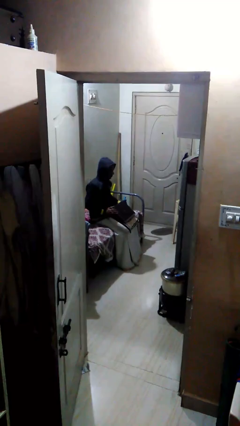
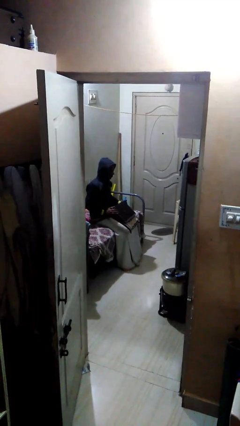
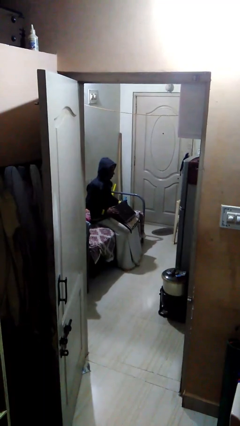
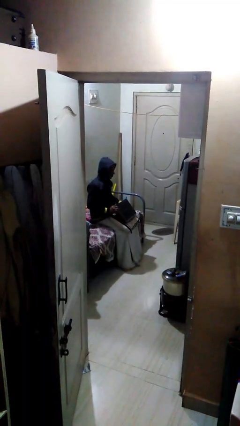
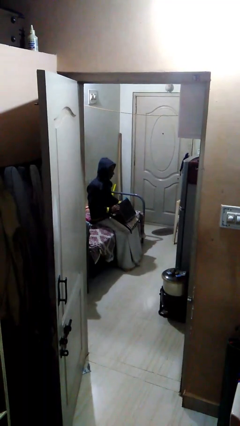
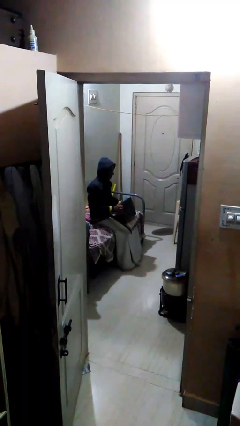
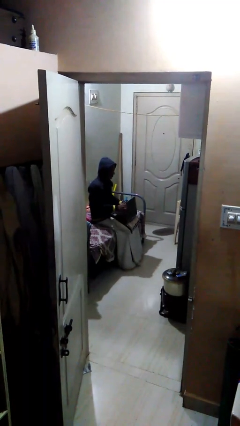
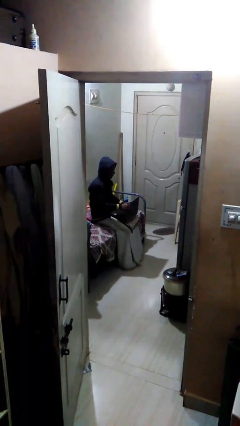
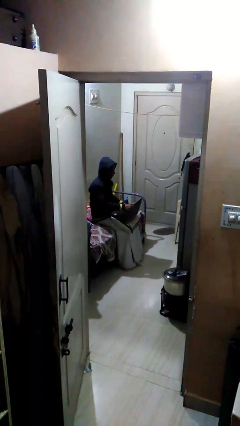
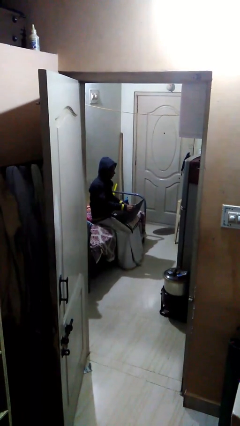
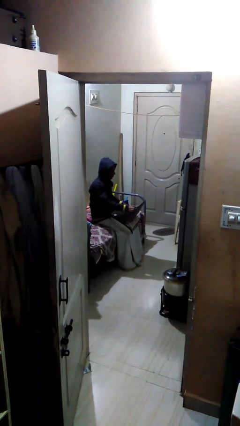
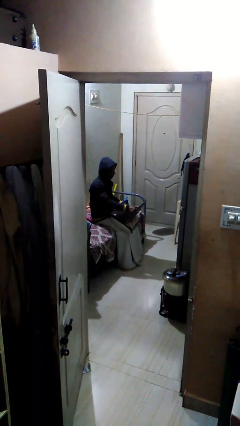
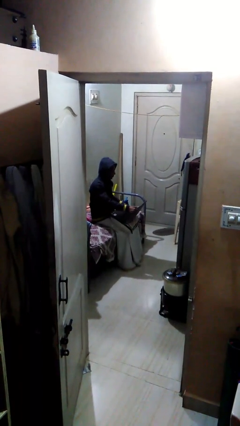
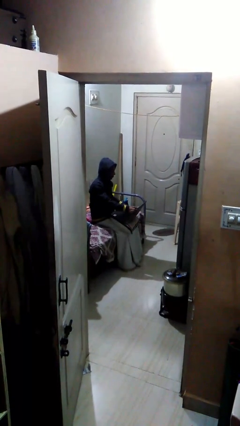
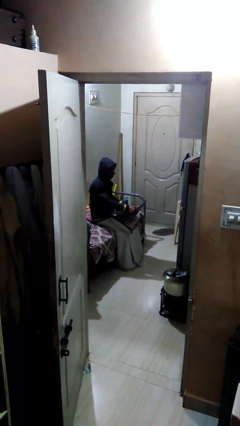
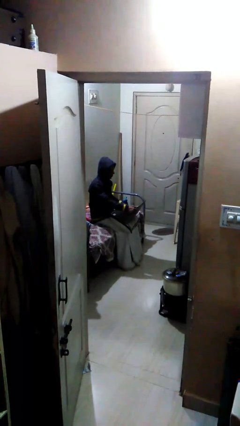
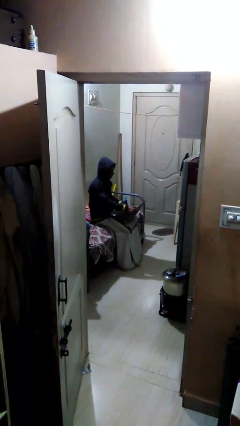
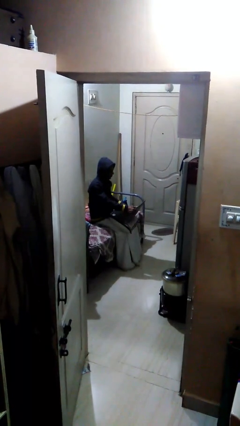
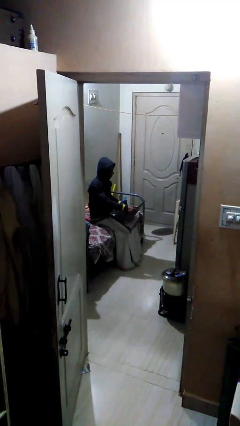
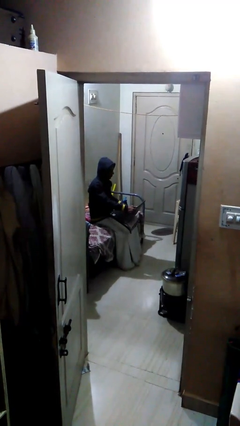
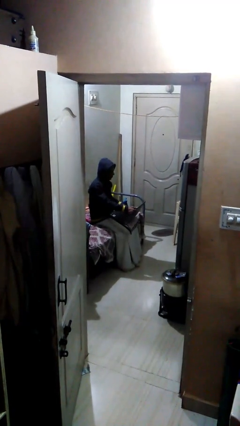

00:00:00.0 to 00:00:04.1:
person interacts with laptop

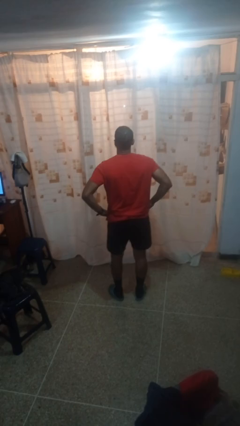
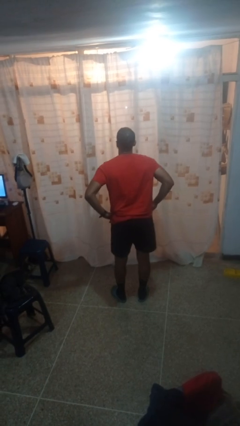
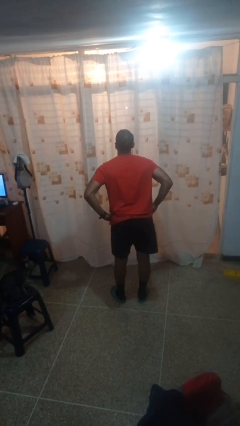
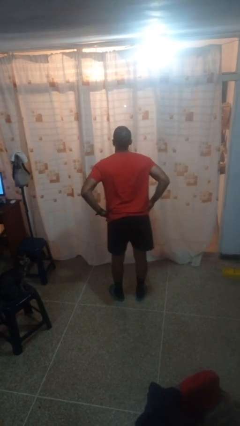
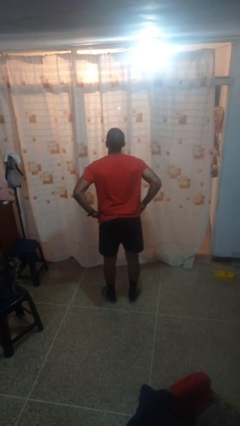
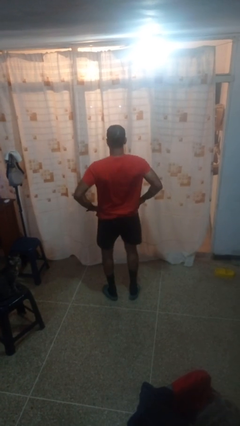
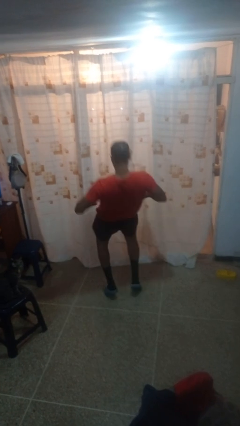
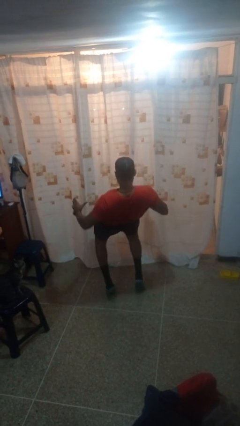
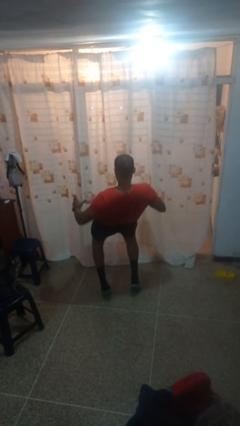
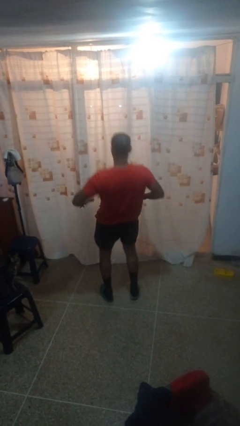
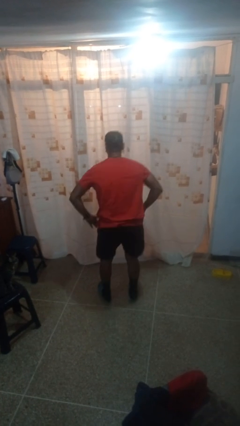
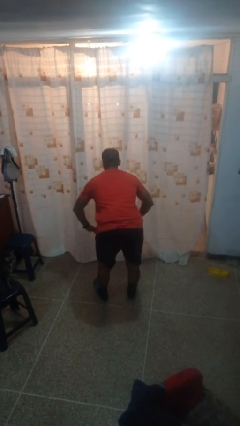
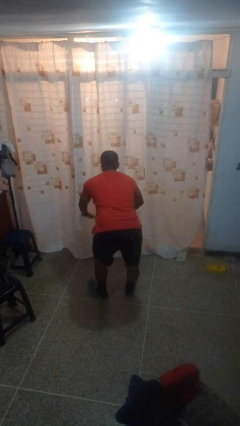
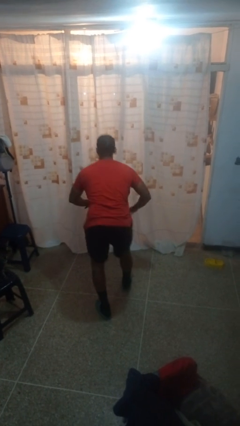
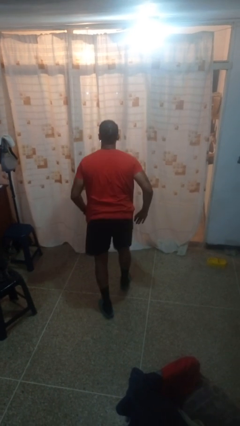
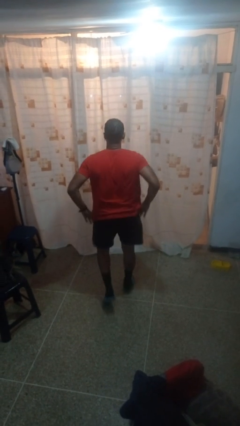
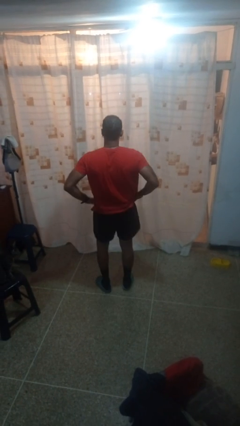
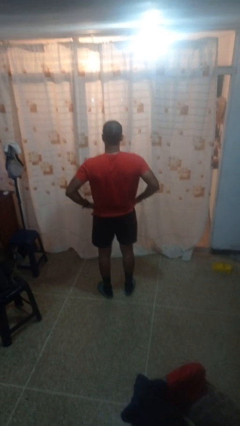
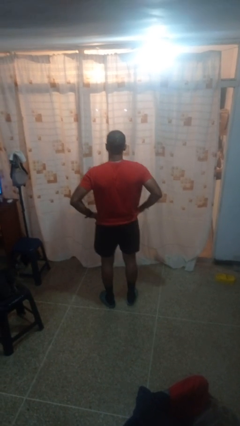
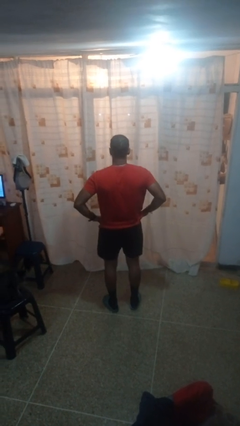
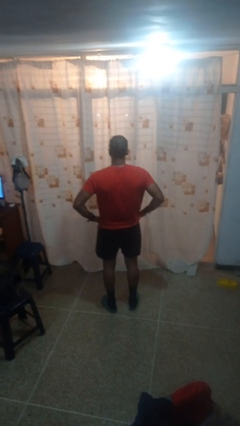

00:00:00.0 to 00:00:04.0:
person wiggles hips

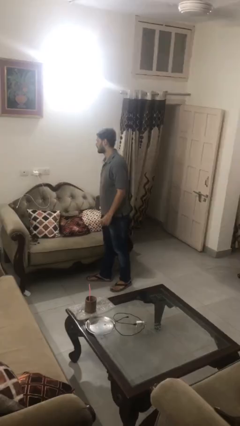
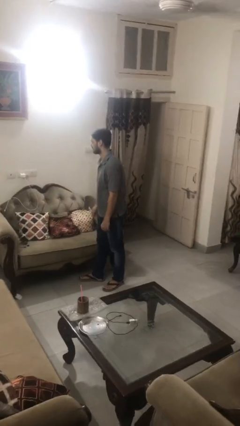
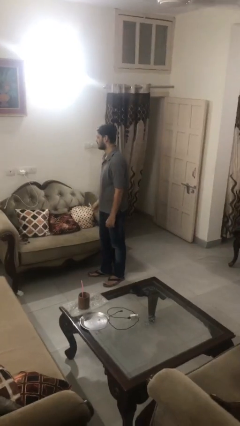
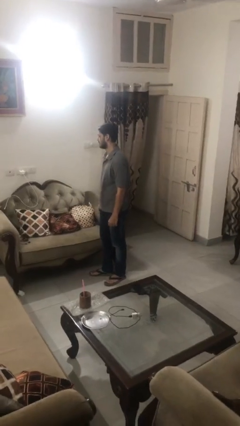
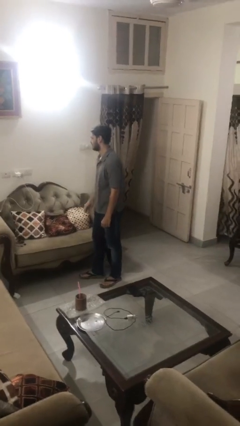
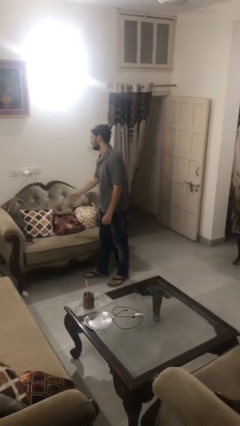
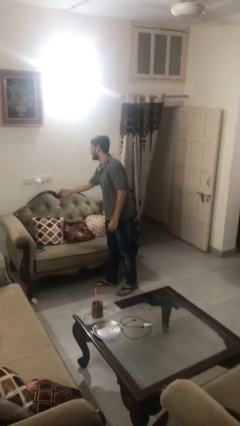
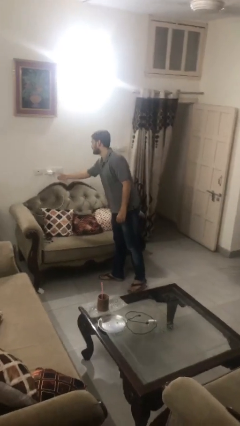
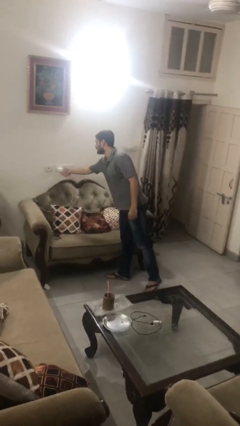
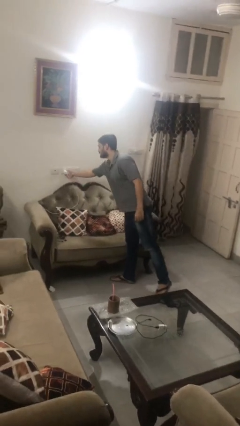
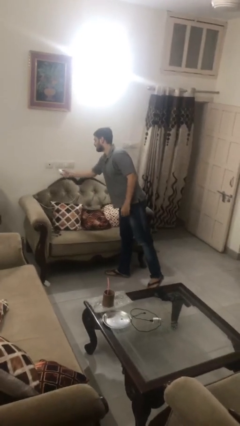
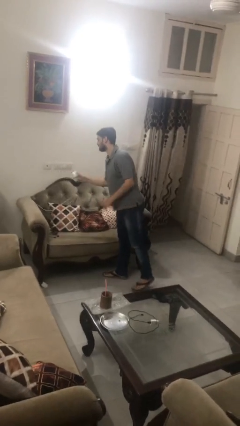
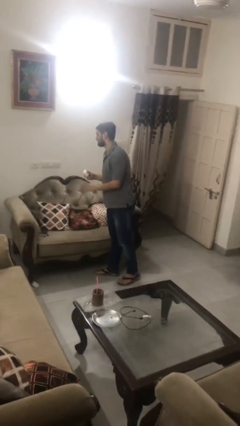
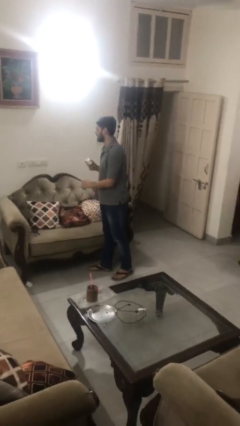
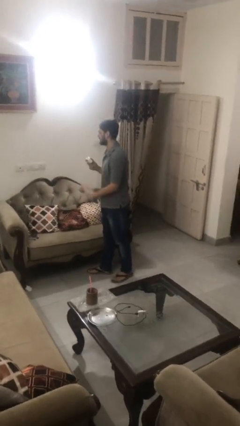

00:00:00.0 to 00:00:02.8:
person unplugs from electrical socket

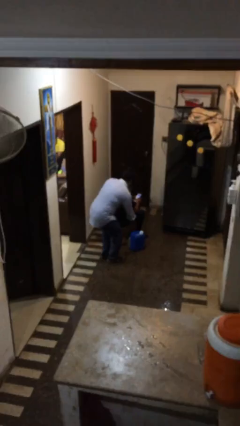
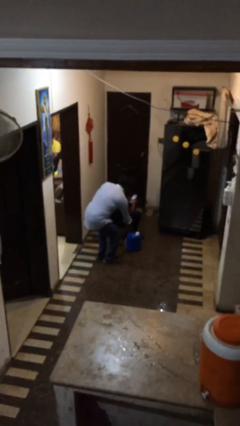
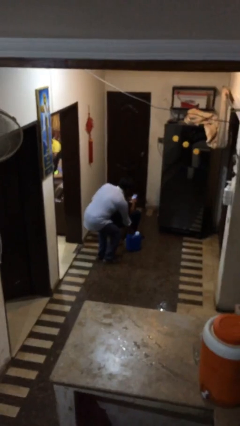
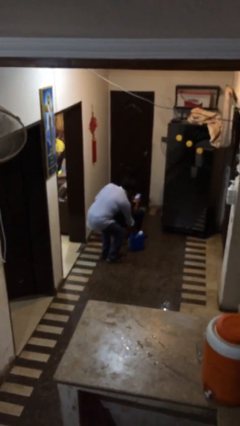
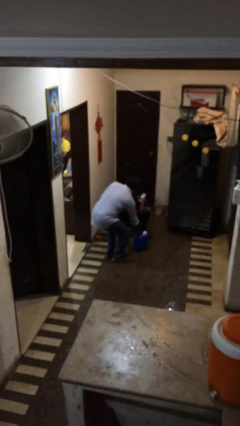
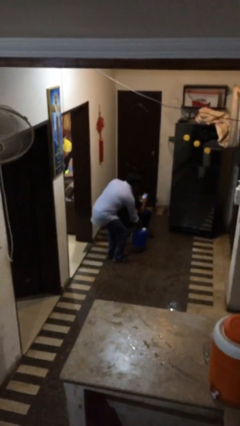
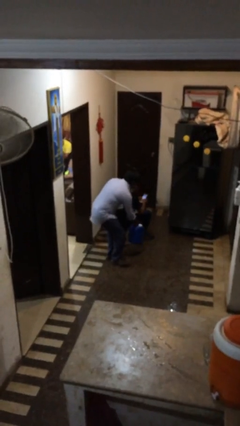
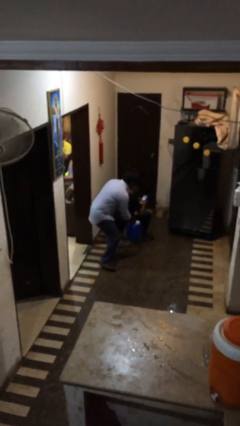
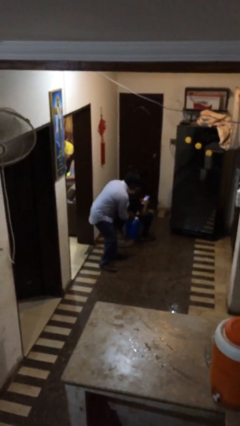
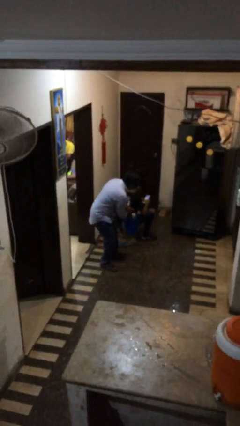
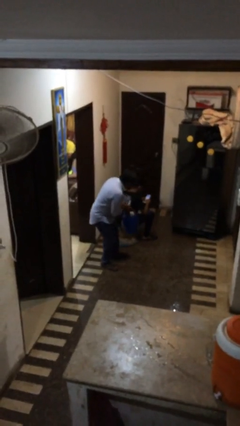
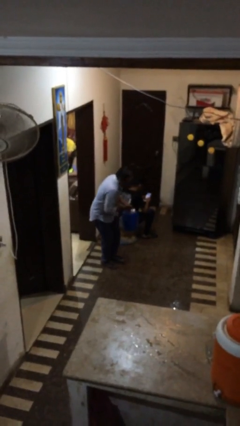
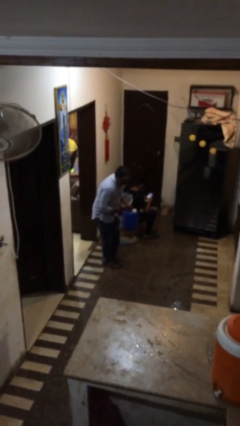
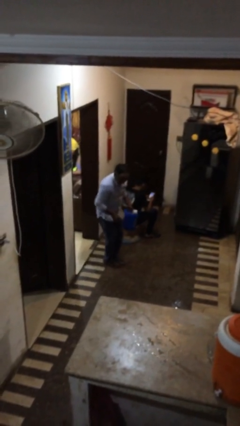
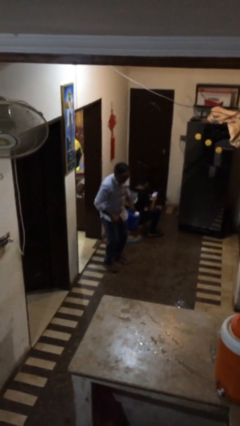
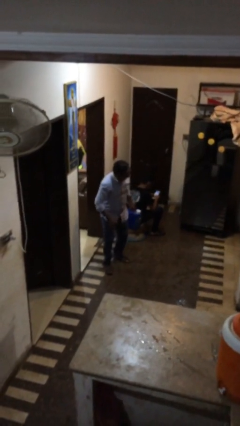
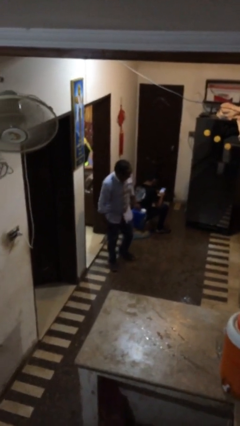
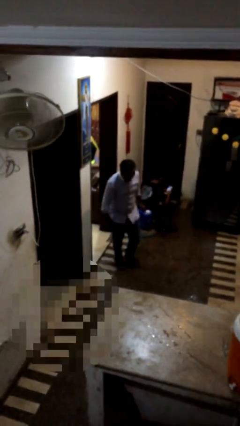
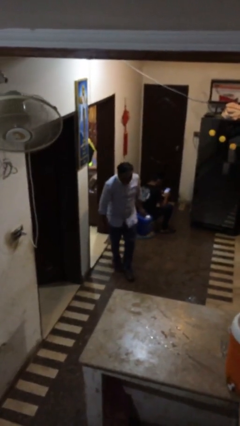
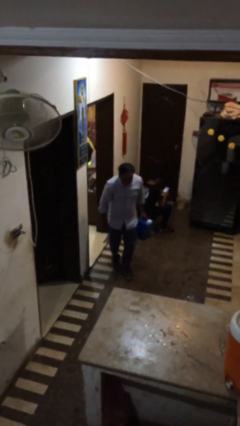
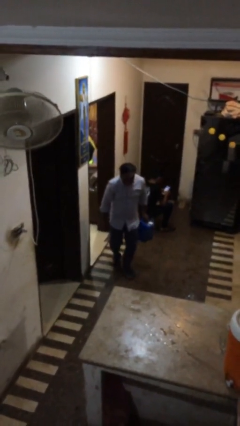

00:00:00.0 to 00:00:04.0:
person steals object from person

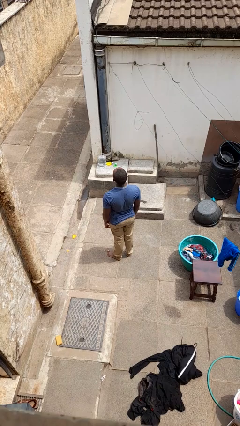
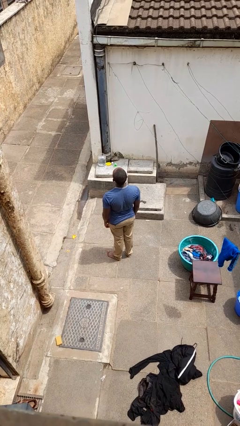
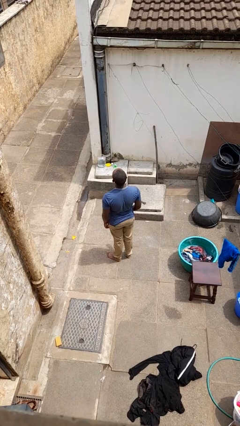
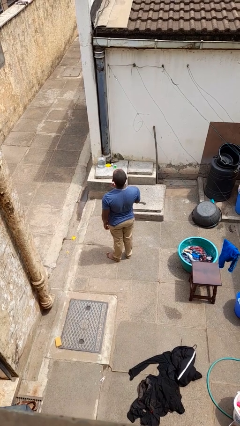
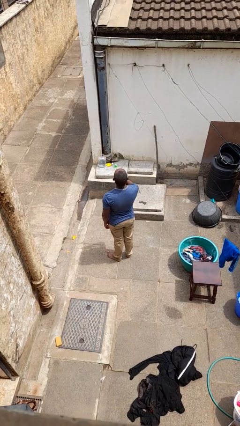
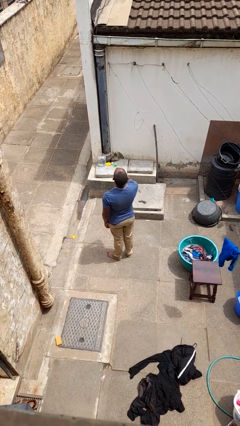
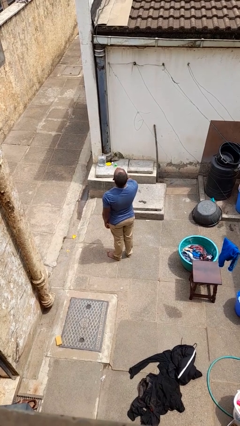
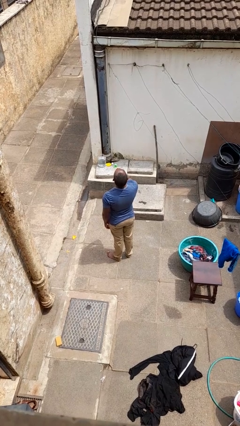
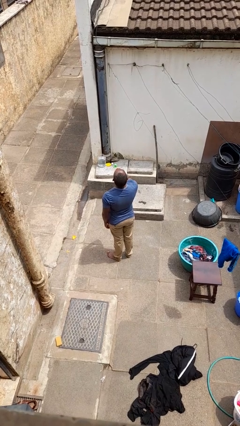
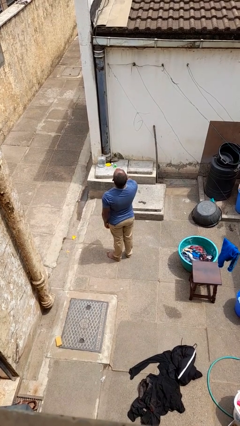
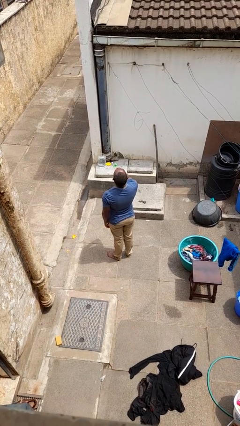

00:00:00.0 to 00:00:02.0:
person yawns

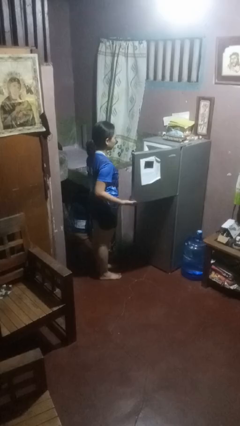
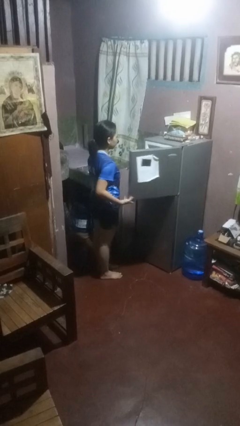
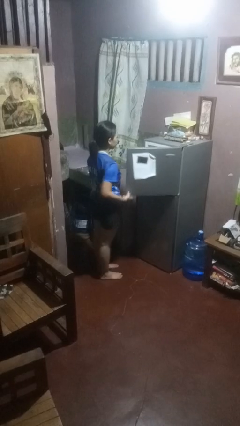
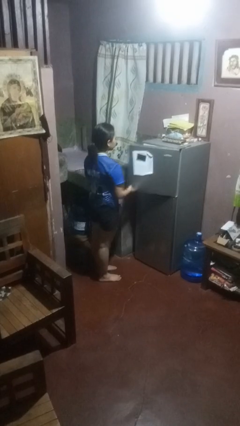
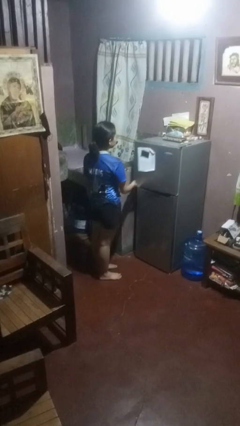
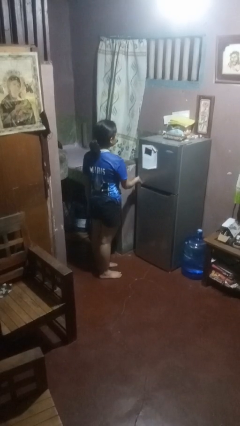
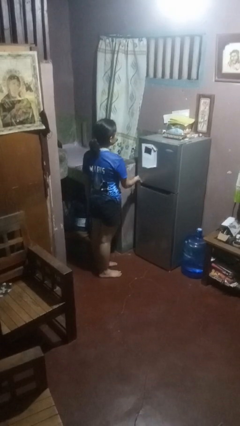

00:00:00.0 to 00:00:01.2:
person closes refrigerator
